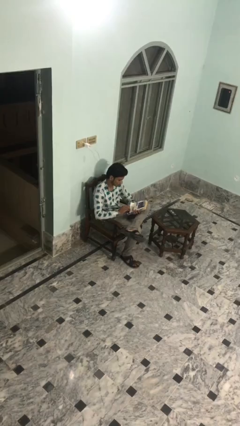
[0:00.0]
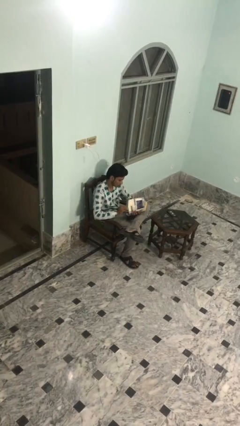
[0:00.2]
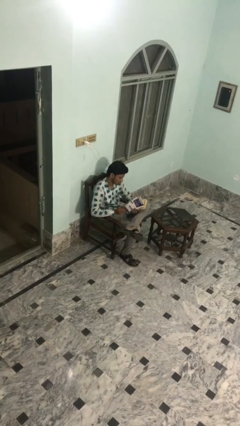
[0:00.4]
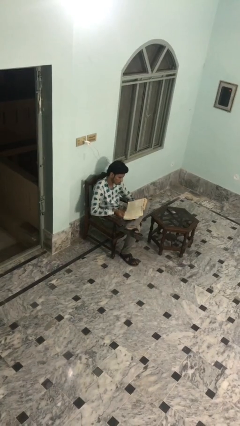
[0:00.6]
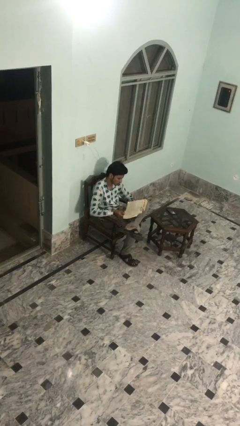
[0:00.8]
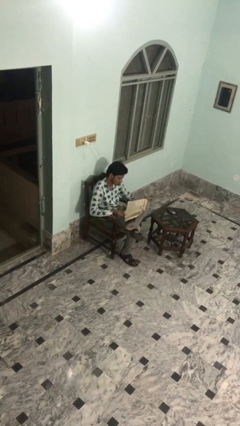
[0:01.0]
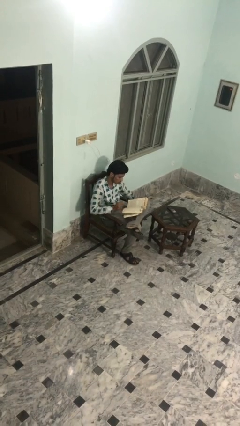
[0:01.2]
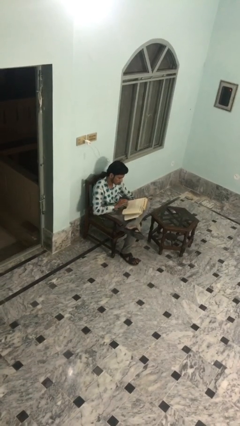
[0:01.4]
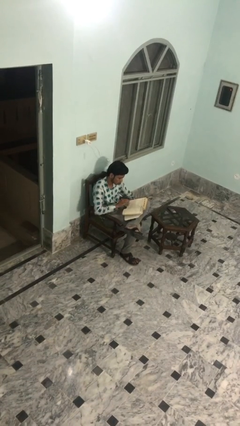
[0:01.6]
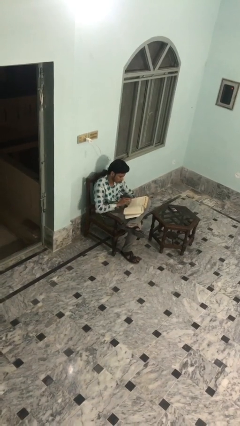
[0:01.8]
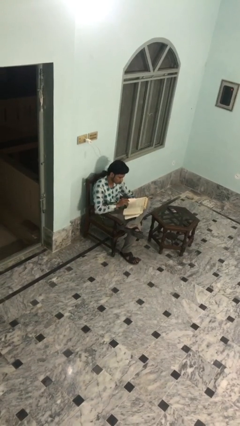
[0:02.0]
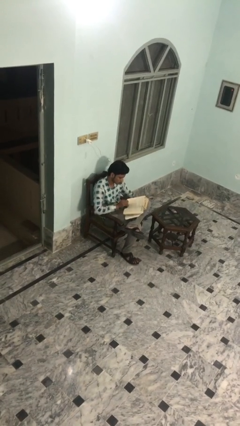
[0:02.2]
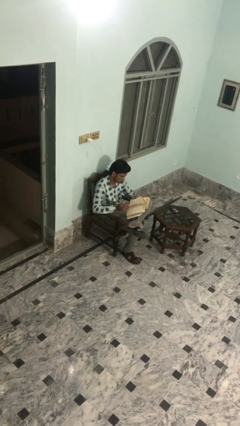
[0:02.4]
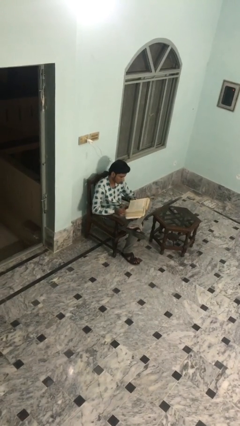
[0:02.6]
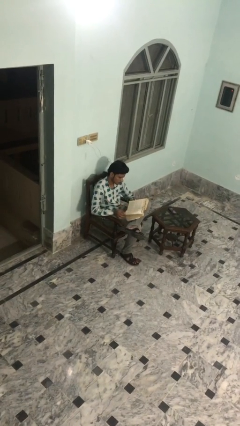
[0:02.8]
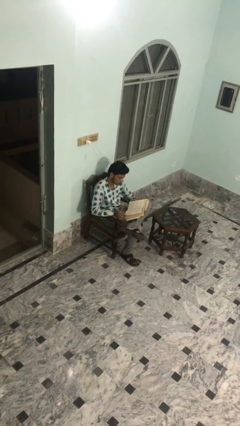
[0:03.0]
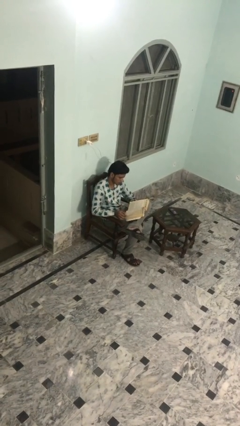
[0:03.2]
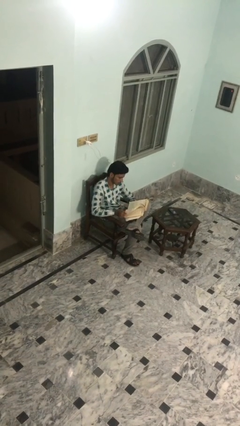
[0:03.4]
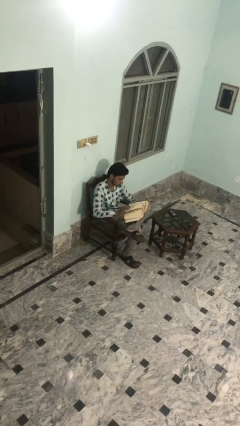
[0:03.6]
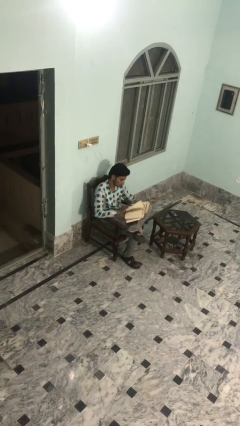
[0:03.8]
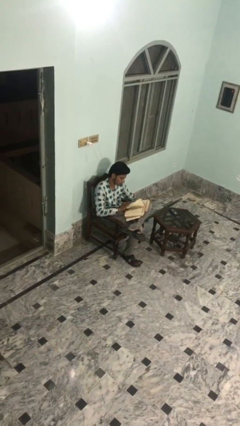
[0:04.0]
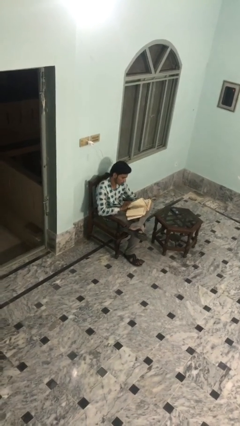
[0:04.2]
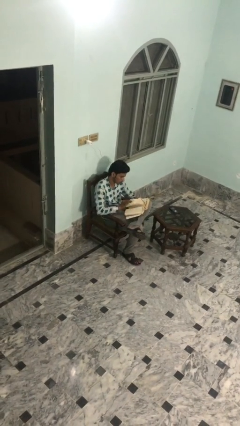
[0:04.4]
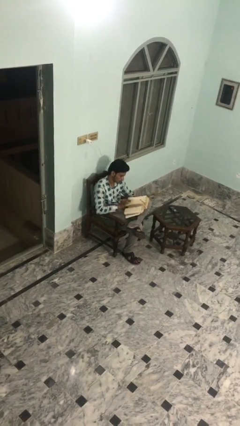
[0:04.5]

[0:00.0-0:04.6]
person reads document

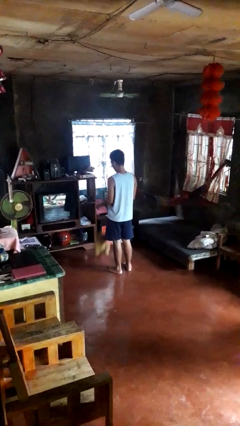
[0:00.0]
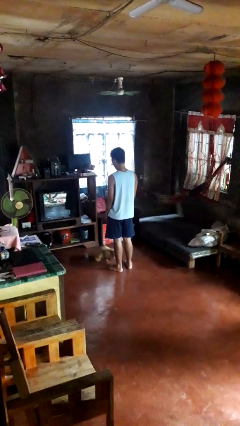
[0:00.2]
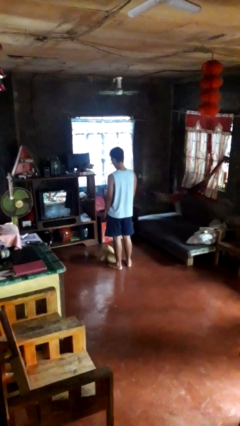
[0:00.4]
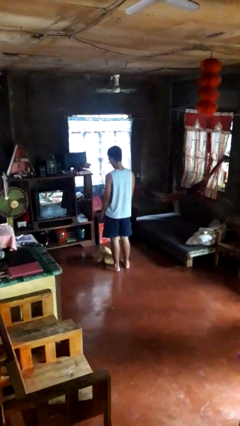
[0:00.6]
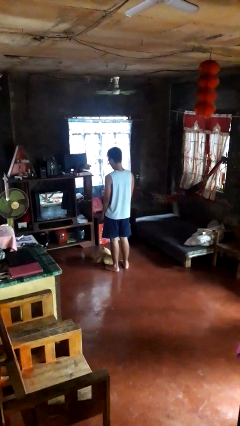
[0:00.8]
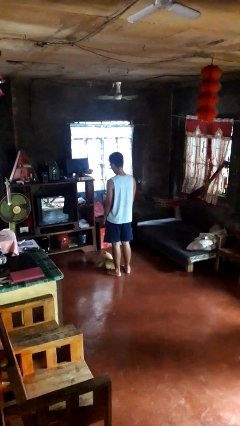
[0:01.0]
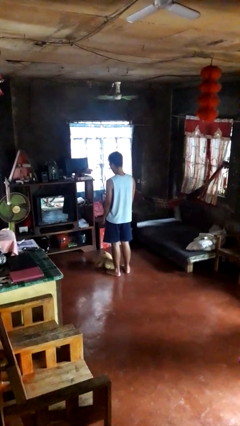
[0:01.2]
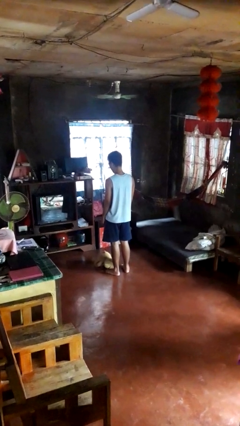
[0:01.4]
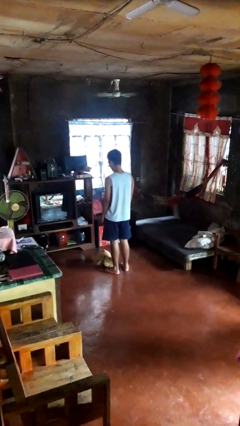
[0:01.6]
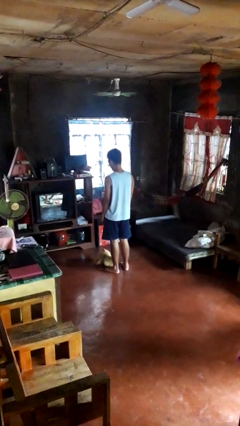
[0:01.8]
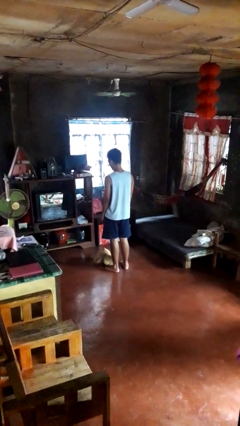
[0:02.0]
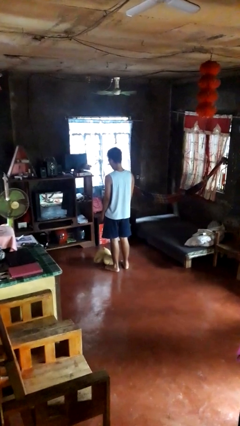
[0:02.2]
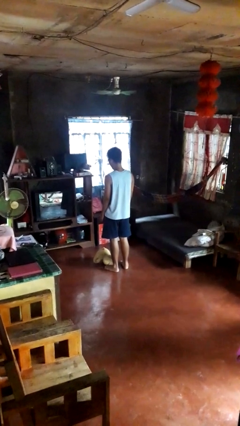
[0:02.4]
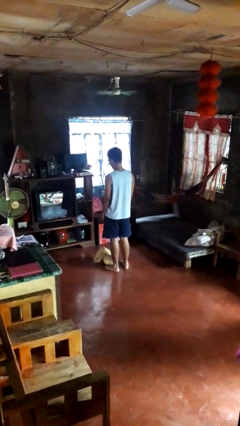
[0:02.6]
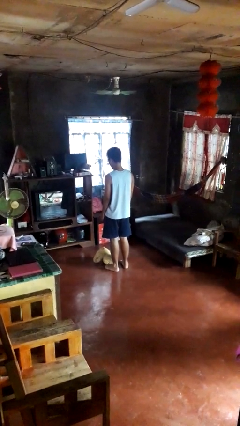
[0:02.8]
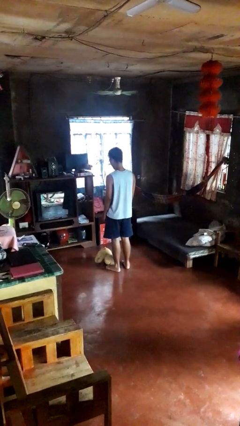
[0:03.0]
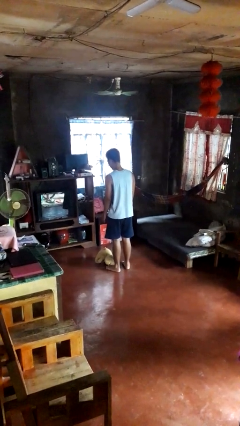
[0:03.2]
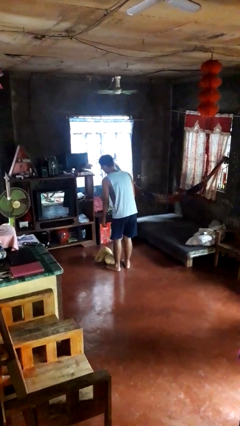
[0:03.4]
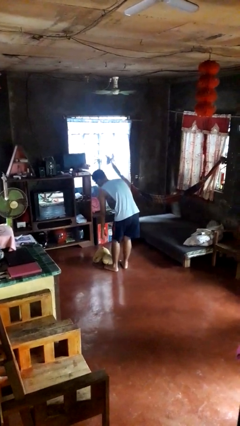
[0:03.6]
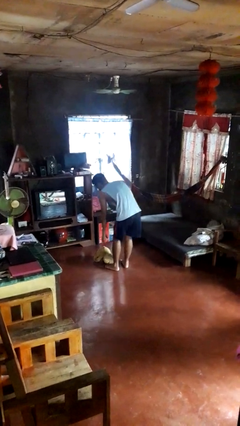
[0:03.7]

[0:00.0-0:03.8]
person drops object

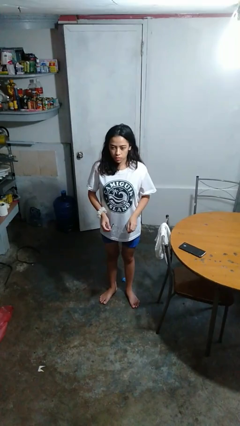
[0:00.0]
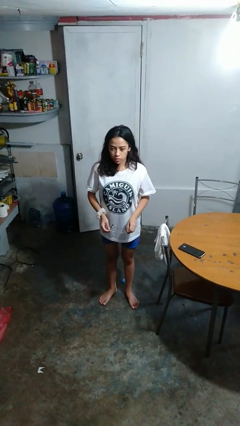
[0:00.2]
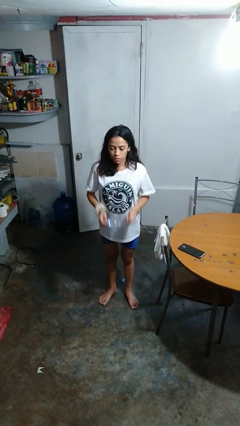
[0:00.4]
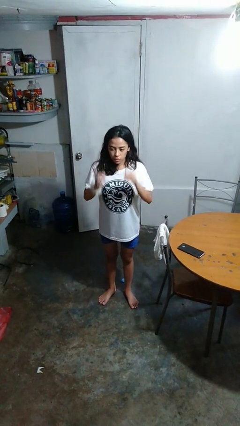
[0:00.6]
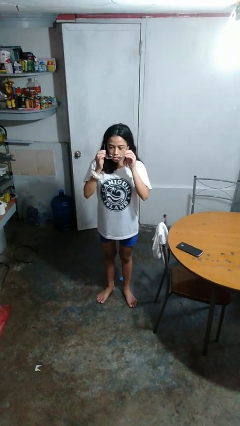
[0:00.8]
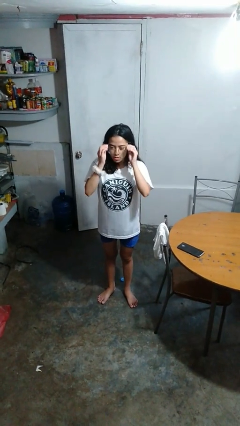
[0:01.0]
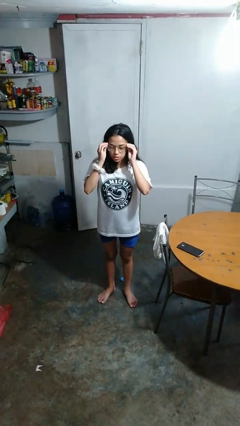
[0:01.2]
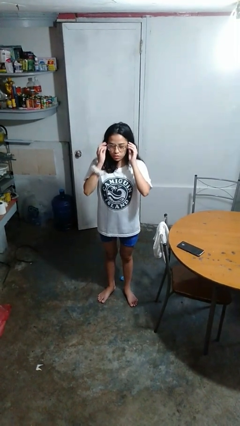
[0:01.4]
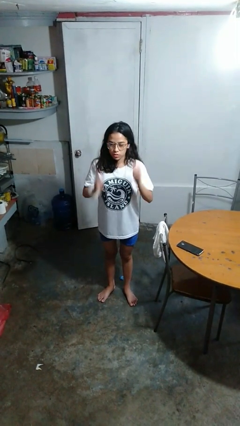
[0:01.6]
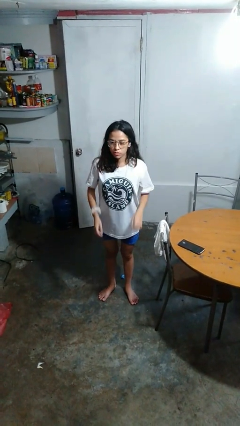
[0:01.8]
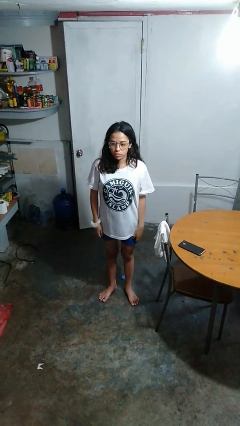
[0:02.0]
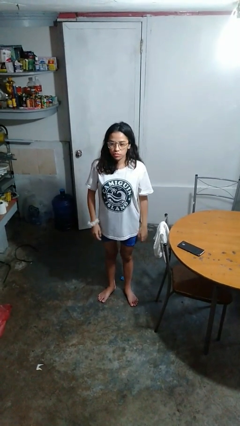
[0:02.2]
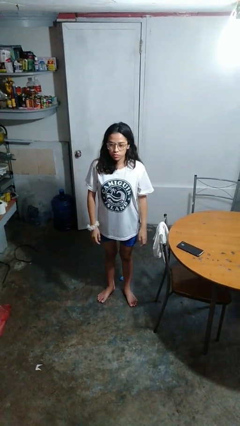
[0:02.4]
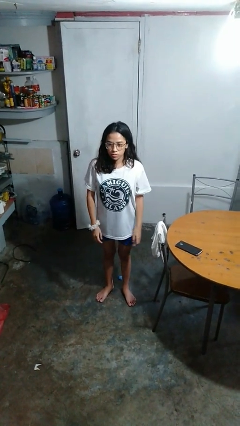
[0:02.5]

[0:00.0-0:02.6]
person puts on glasses

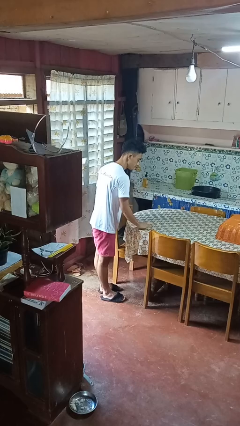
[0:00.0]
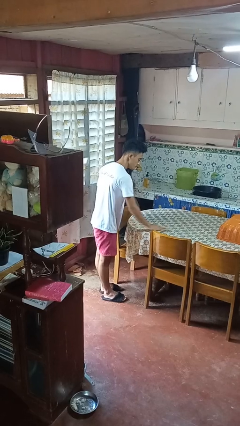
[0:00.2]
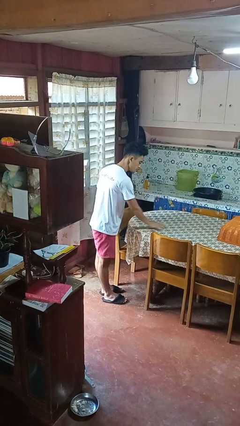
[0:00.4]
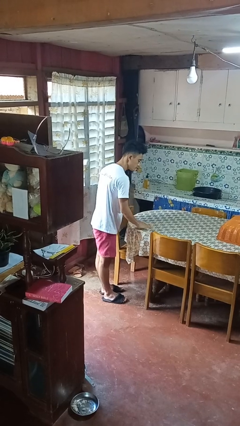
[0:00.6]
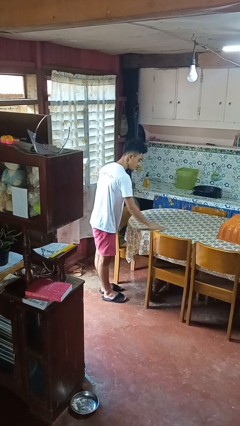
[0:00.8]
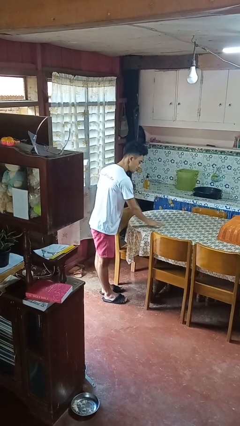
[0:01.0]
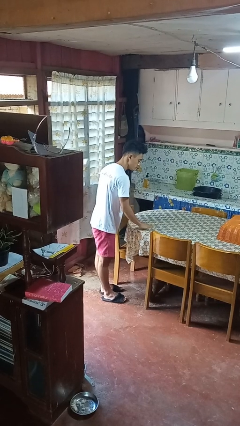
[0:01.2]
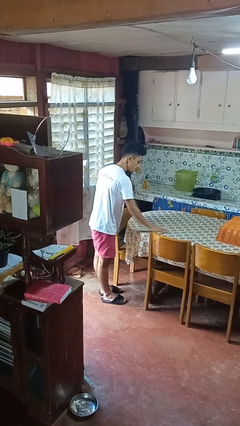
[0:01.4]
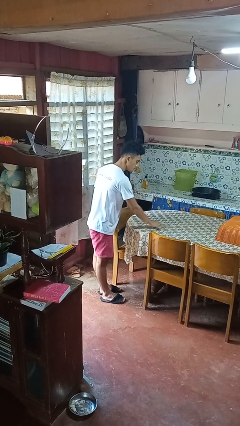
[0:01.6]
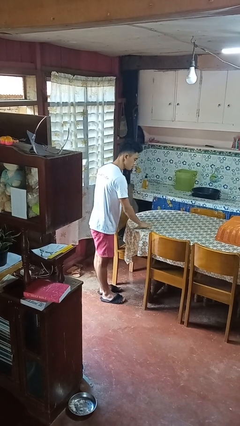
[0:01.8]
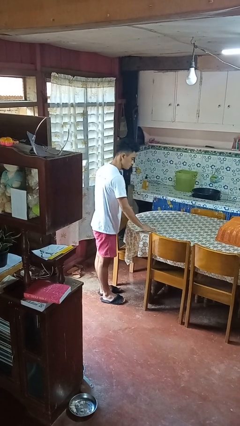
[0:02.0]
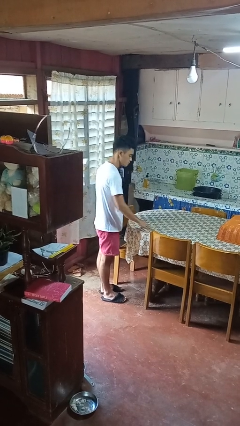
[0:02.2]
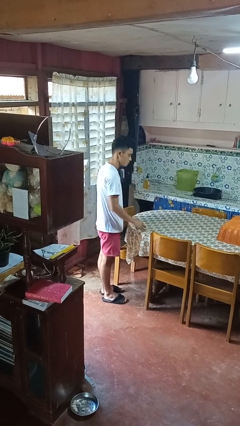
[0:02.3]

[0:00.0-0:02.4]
person cleans table with rag

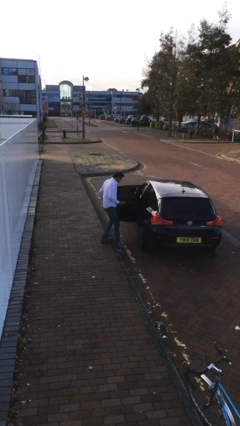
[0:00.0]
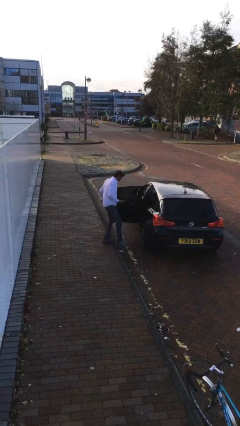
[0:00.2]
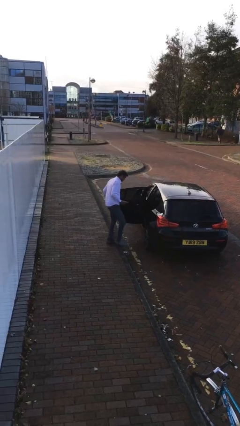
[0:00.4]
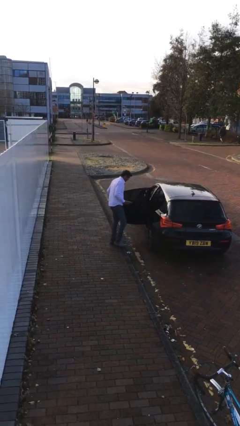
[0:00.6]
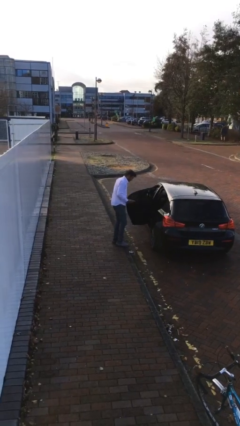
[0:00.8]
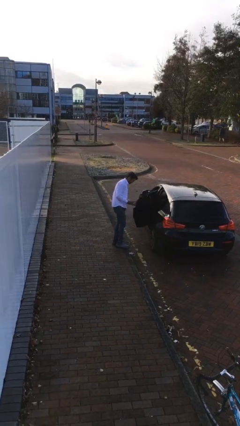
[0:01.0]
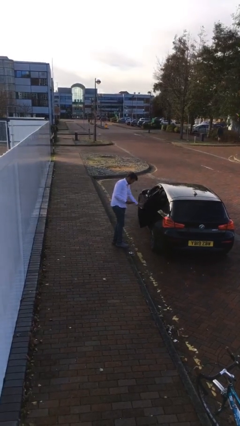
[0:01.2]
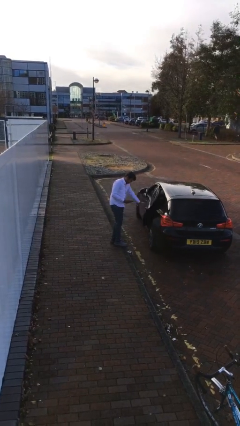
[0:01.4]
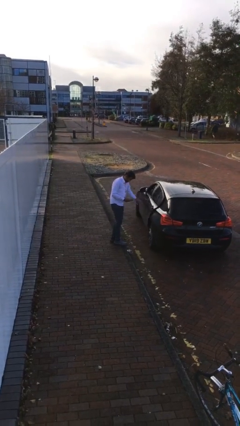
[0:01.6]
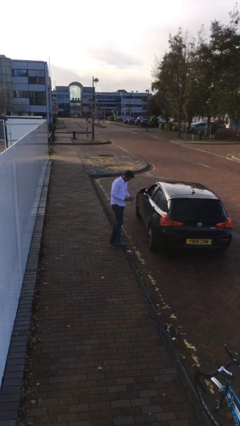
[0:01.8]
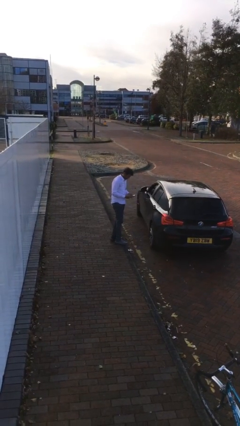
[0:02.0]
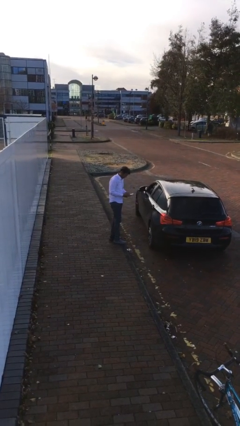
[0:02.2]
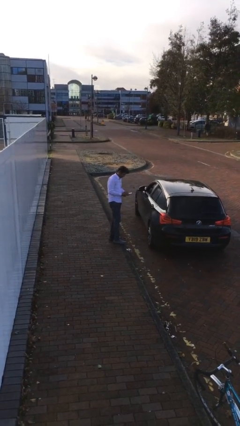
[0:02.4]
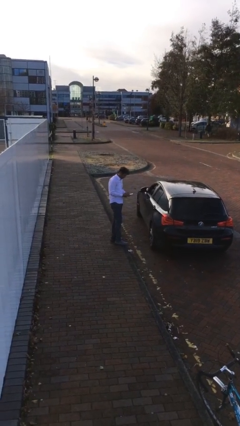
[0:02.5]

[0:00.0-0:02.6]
person closes car door

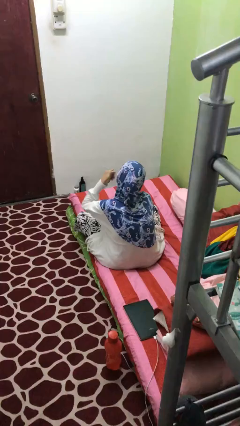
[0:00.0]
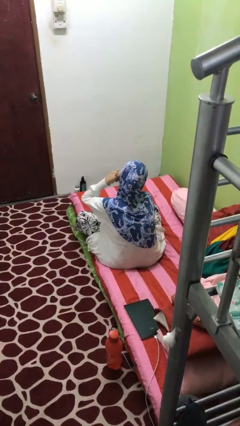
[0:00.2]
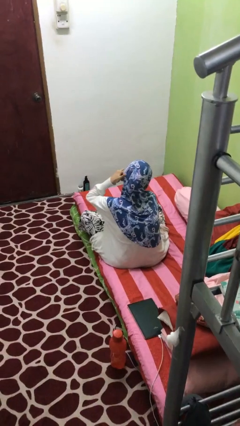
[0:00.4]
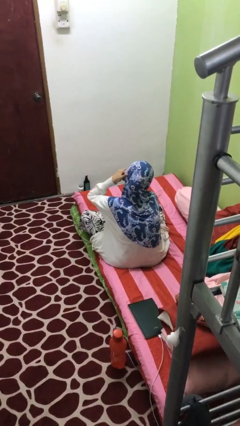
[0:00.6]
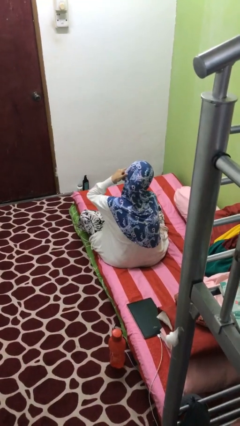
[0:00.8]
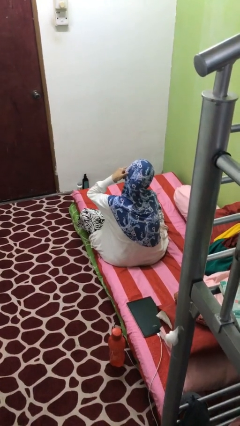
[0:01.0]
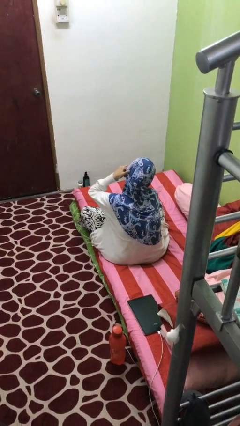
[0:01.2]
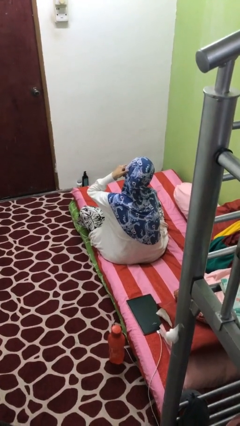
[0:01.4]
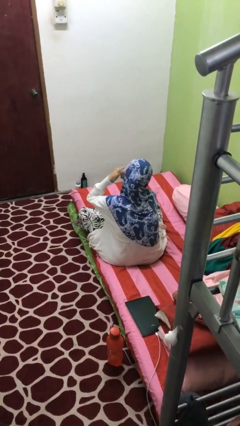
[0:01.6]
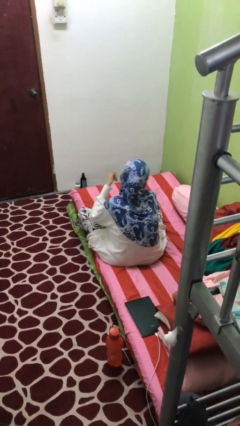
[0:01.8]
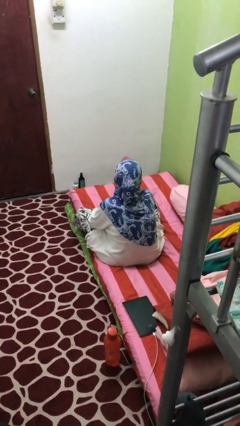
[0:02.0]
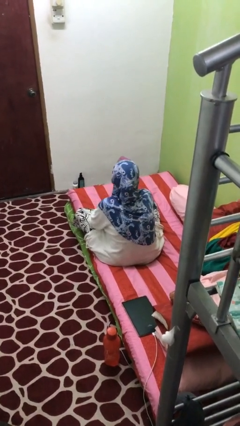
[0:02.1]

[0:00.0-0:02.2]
person gestures call me
